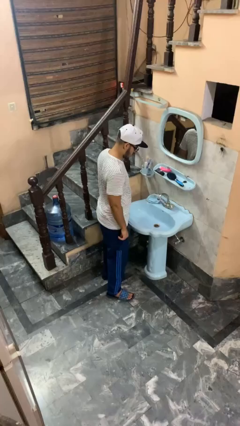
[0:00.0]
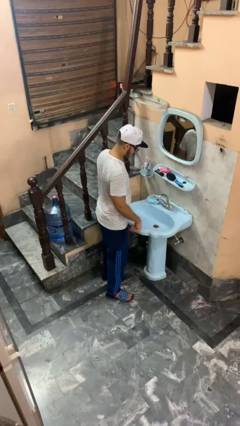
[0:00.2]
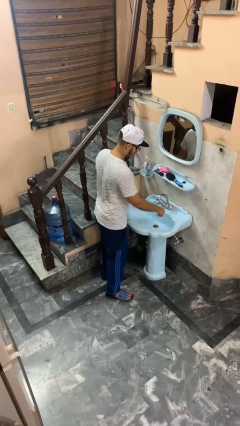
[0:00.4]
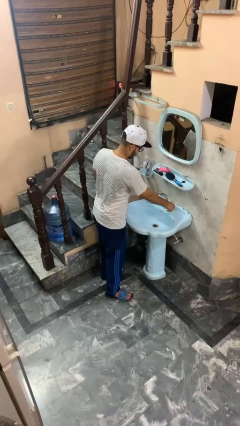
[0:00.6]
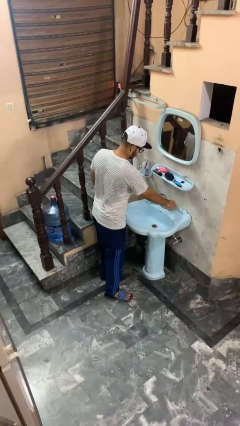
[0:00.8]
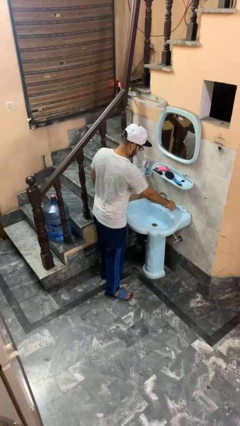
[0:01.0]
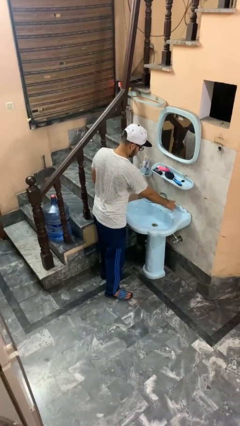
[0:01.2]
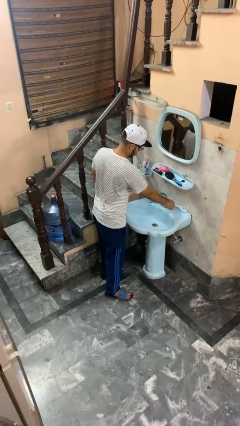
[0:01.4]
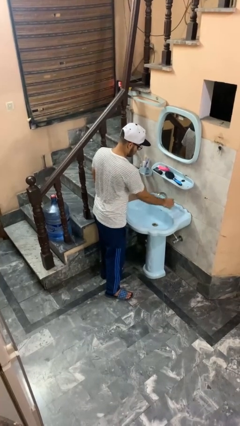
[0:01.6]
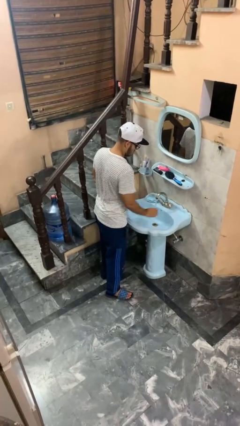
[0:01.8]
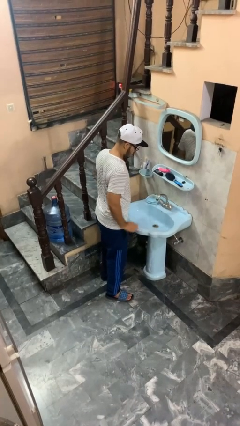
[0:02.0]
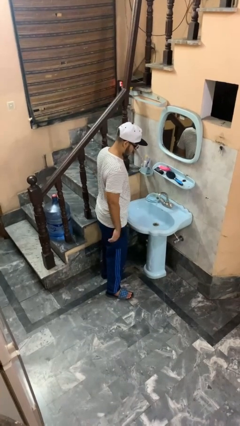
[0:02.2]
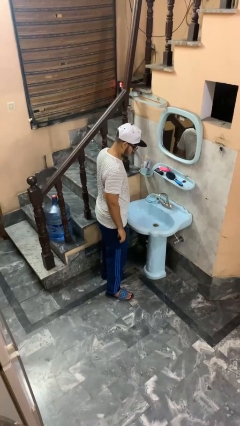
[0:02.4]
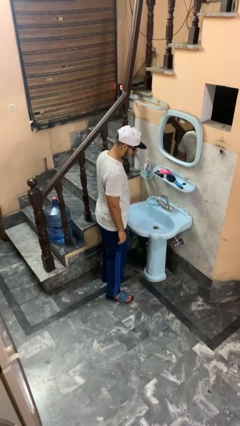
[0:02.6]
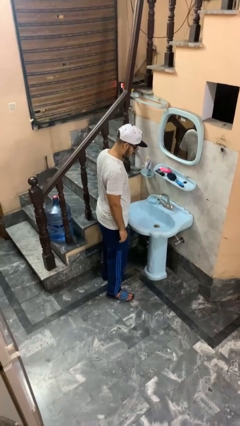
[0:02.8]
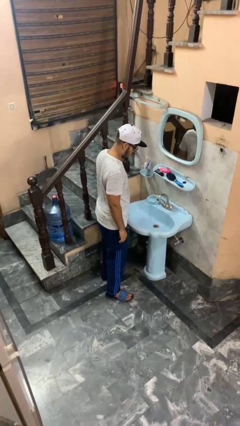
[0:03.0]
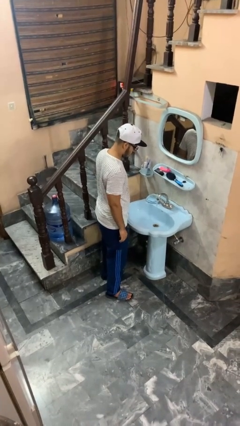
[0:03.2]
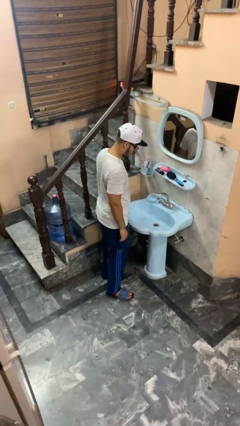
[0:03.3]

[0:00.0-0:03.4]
person turns on faucet

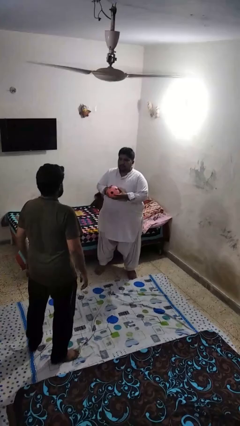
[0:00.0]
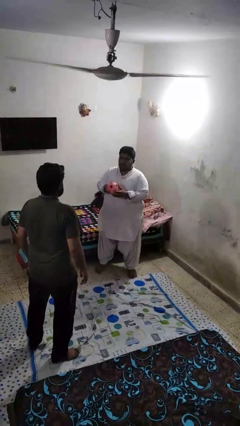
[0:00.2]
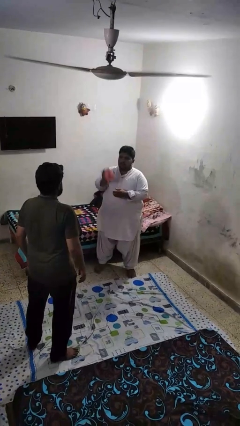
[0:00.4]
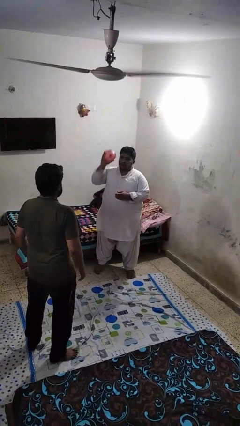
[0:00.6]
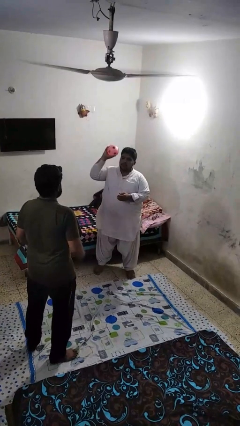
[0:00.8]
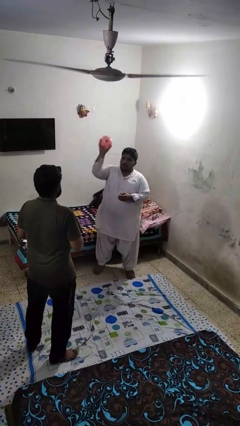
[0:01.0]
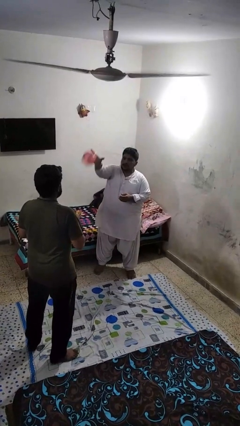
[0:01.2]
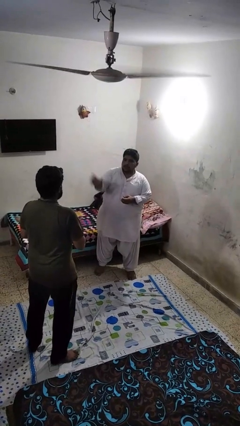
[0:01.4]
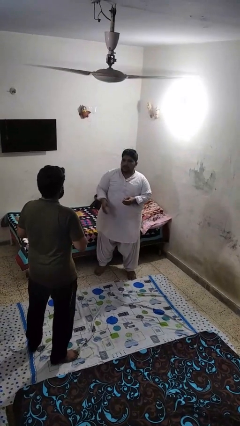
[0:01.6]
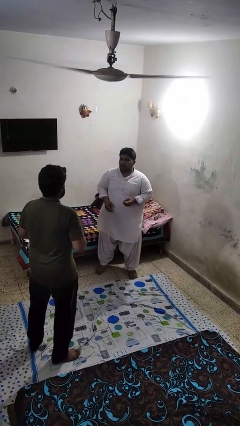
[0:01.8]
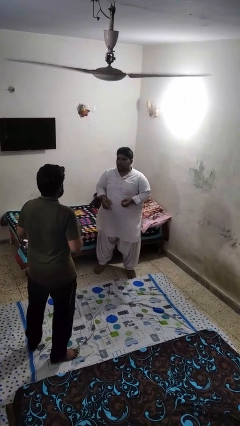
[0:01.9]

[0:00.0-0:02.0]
person throws object to person

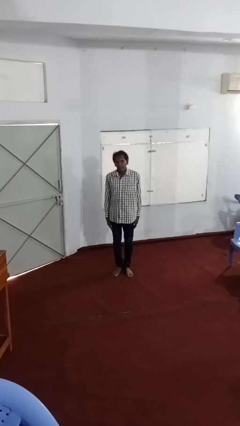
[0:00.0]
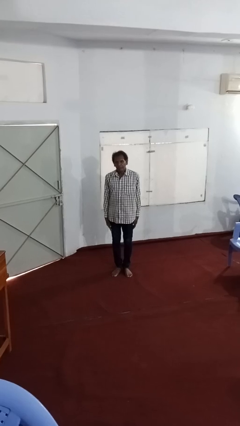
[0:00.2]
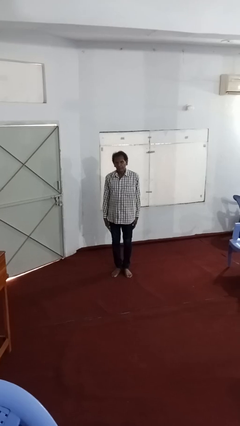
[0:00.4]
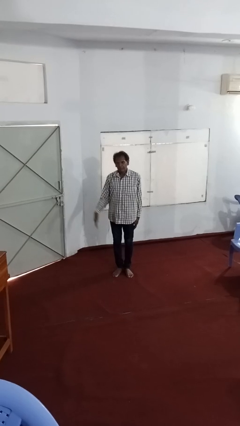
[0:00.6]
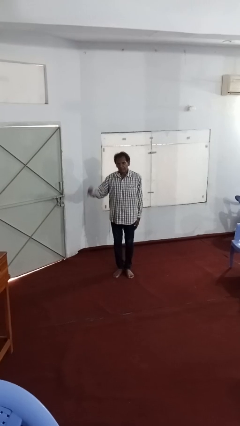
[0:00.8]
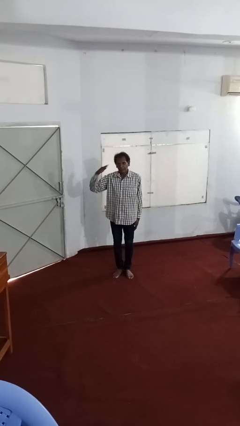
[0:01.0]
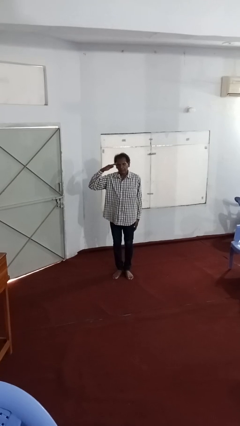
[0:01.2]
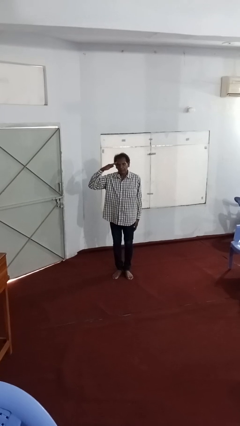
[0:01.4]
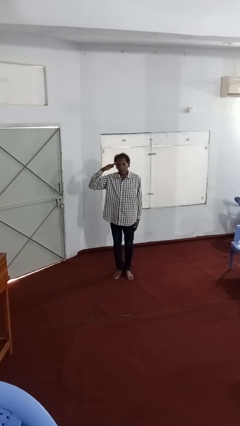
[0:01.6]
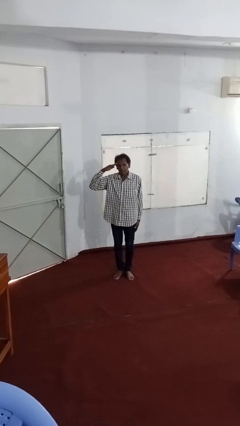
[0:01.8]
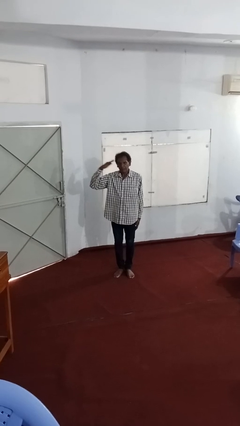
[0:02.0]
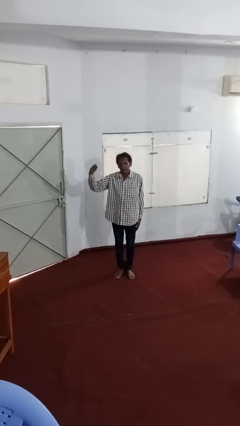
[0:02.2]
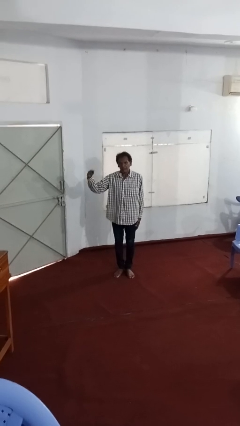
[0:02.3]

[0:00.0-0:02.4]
person salutes

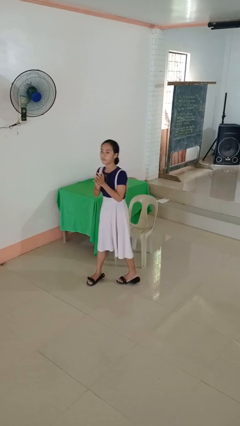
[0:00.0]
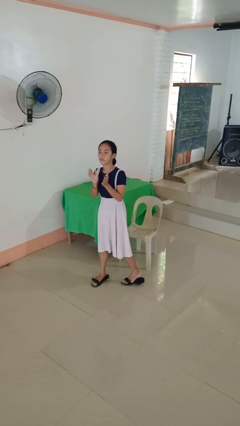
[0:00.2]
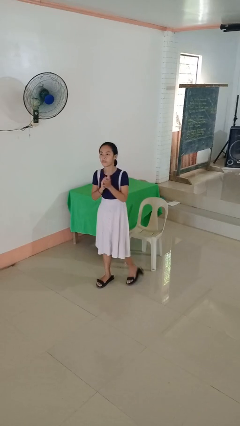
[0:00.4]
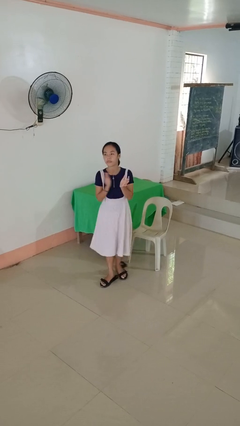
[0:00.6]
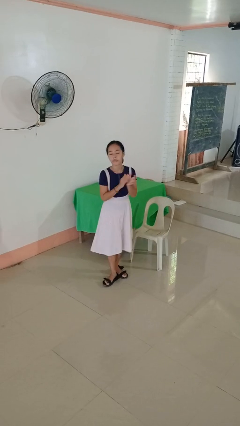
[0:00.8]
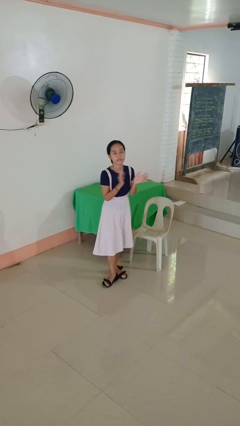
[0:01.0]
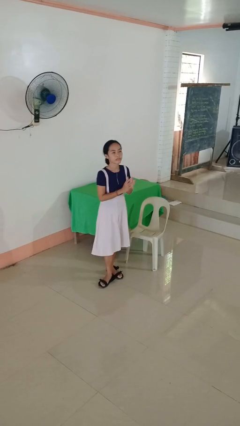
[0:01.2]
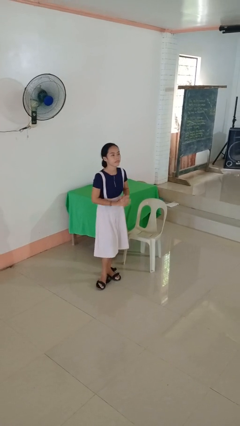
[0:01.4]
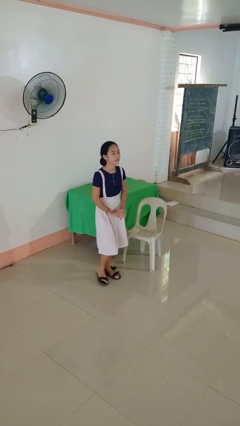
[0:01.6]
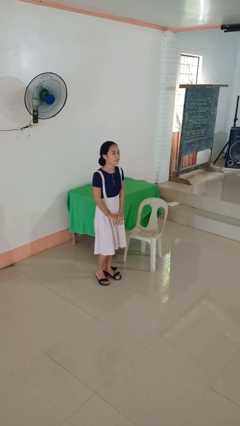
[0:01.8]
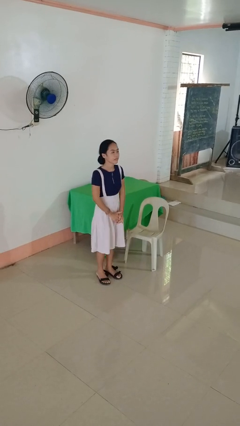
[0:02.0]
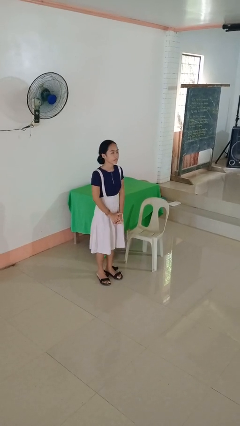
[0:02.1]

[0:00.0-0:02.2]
person claps hands

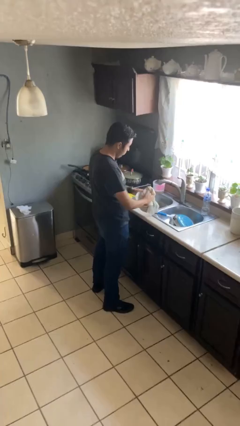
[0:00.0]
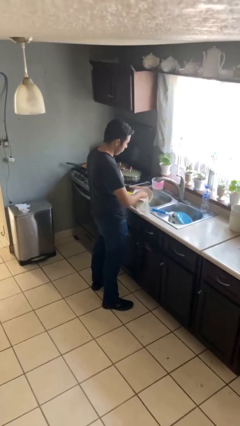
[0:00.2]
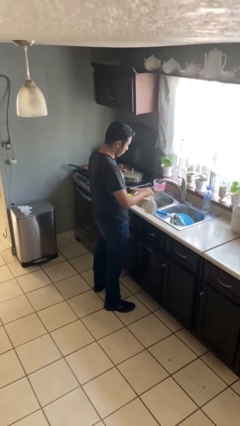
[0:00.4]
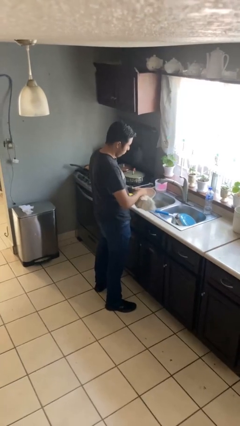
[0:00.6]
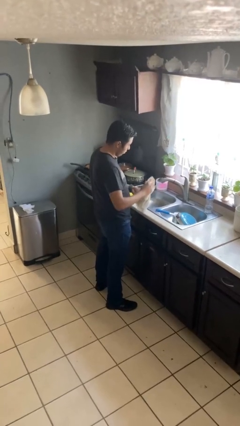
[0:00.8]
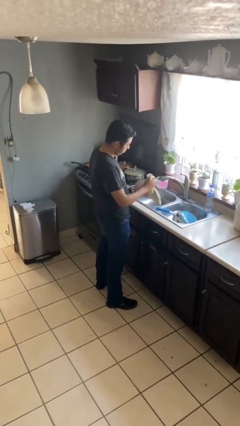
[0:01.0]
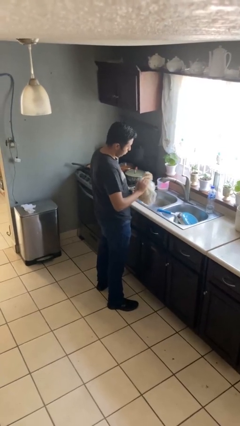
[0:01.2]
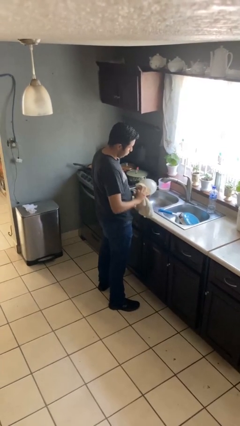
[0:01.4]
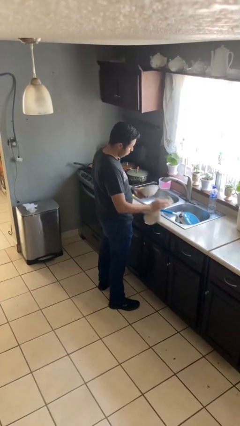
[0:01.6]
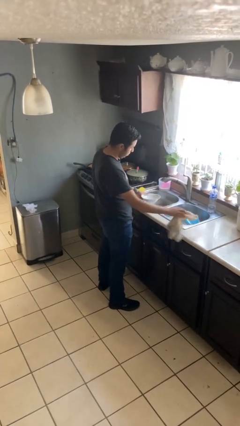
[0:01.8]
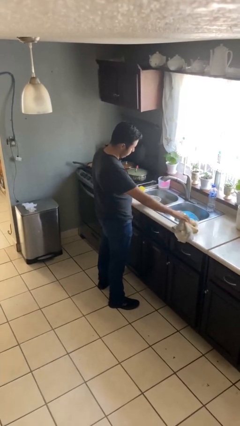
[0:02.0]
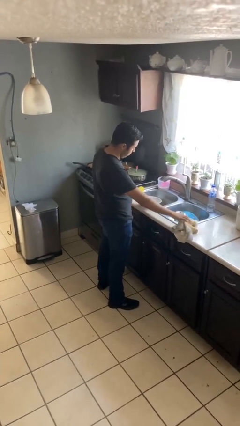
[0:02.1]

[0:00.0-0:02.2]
person dries dish

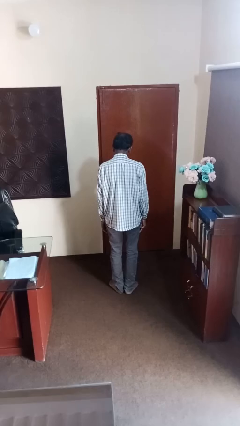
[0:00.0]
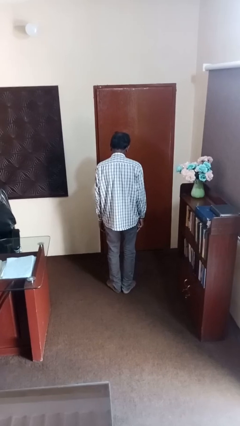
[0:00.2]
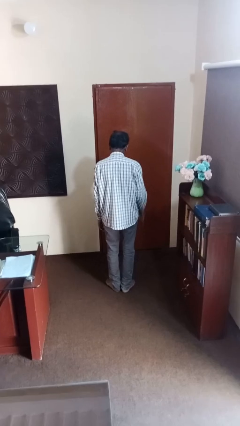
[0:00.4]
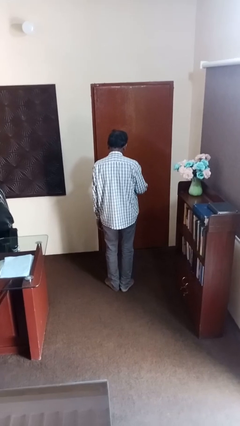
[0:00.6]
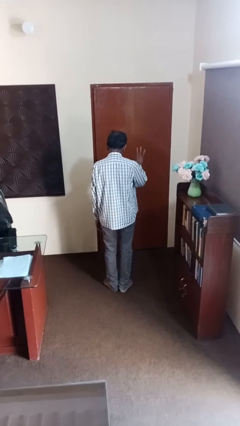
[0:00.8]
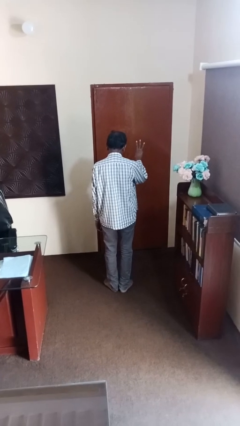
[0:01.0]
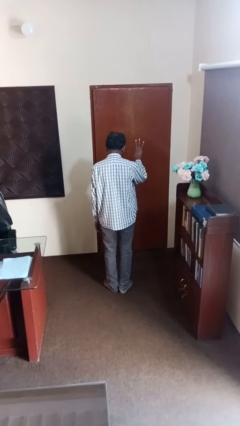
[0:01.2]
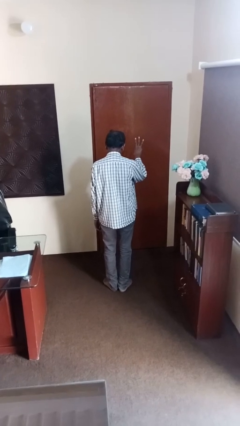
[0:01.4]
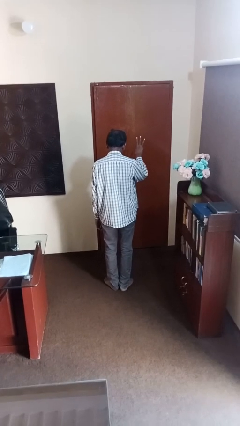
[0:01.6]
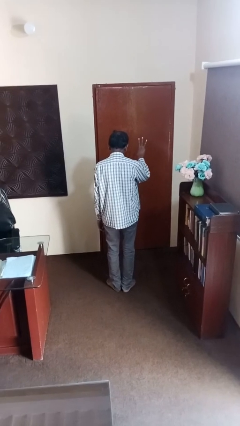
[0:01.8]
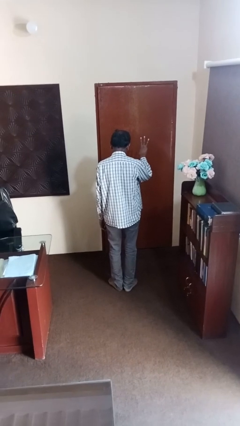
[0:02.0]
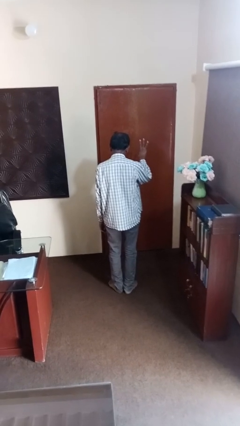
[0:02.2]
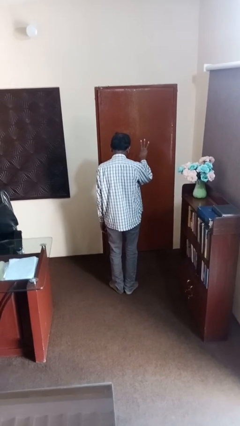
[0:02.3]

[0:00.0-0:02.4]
person gestures number three

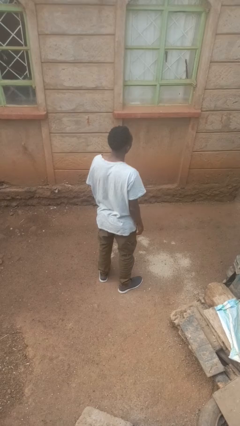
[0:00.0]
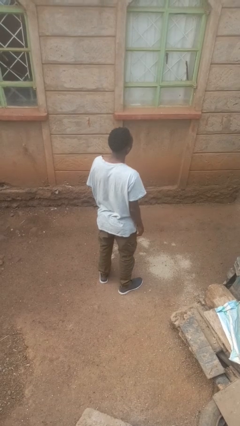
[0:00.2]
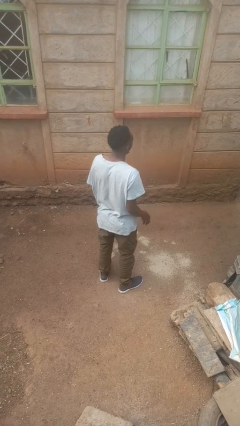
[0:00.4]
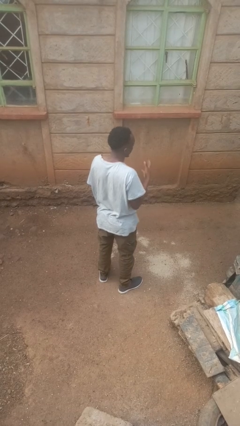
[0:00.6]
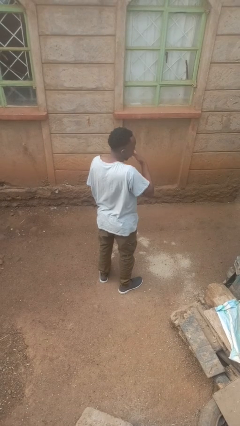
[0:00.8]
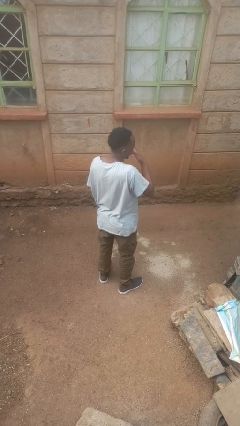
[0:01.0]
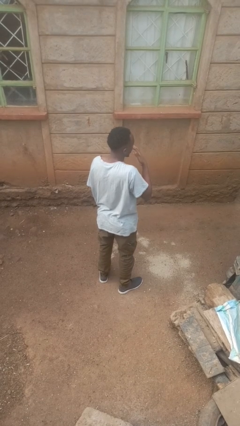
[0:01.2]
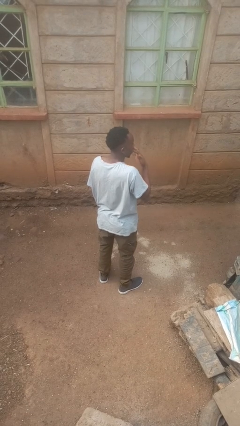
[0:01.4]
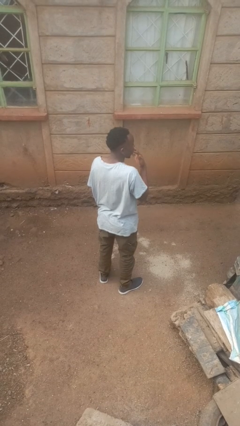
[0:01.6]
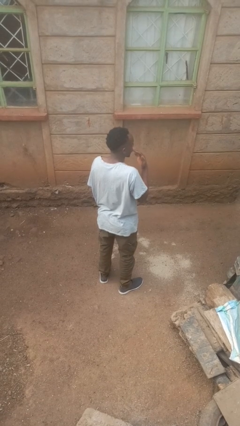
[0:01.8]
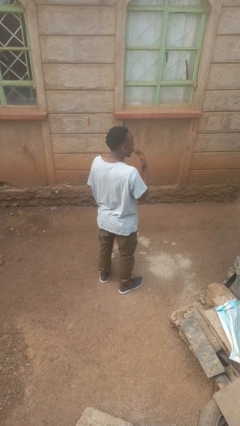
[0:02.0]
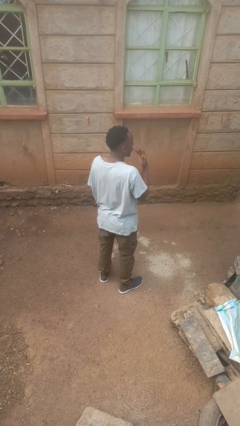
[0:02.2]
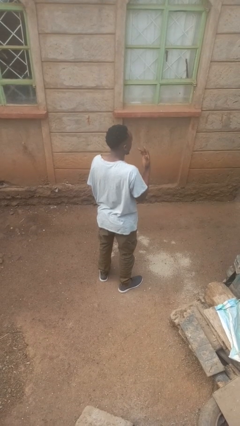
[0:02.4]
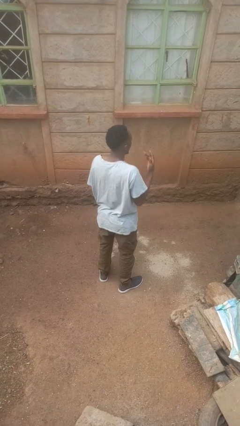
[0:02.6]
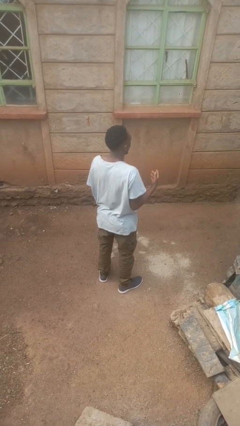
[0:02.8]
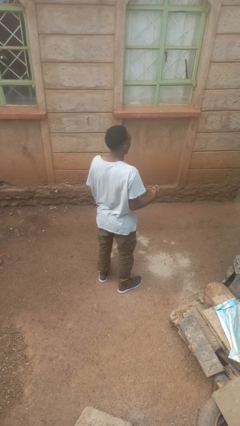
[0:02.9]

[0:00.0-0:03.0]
person licks fingers
